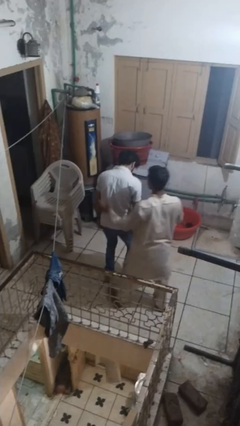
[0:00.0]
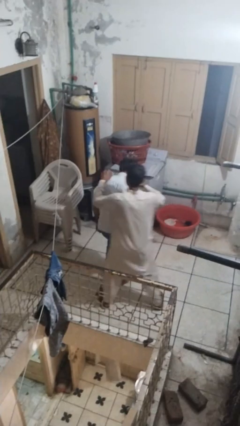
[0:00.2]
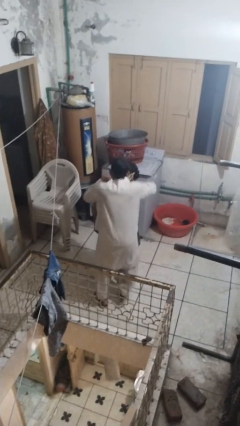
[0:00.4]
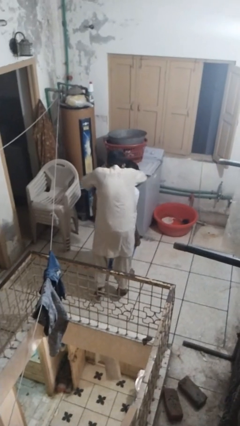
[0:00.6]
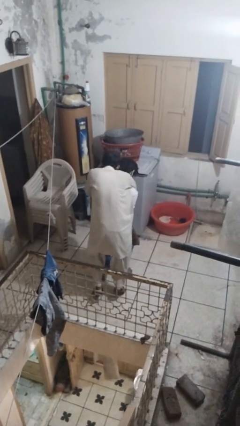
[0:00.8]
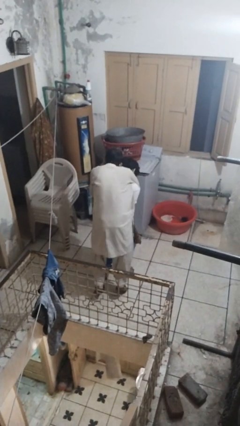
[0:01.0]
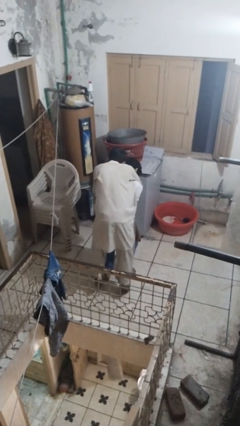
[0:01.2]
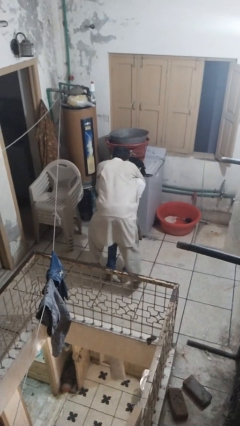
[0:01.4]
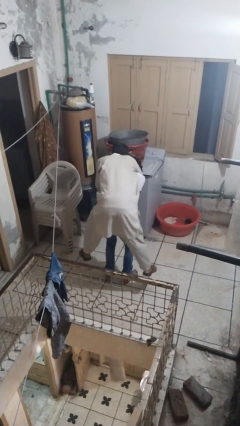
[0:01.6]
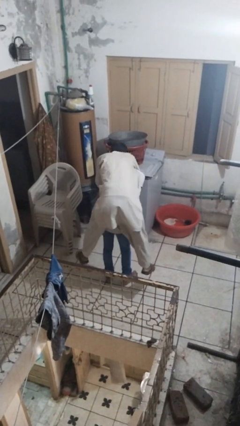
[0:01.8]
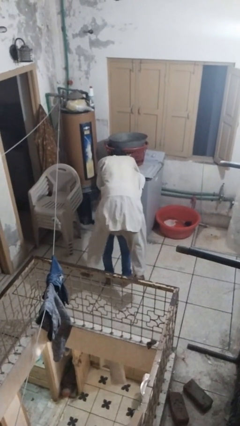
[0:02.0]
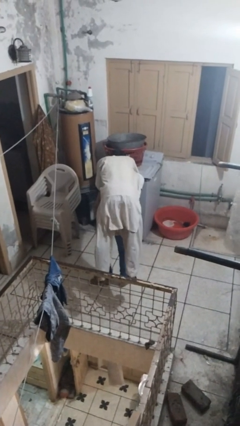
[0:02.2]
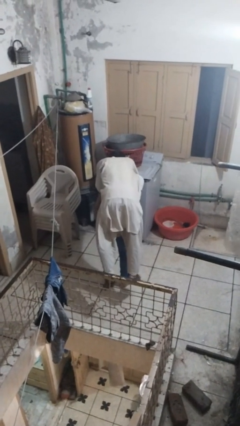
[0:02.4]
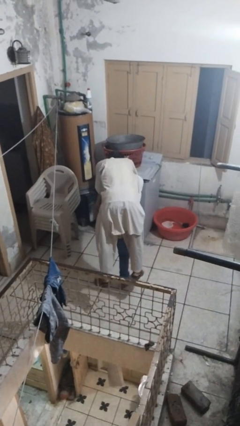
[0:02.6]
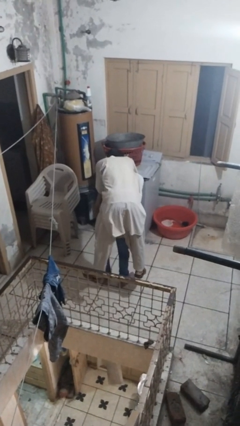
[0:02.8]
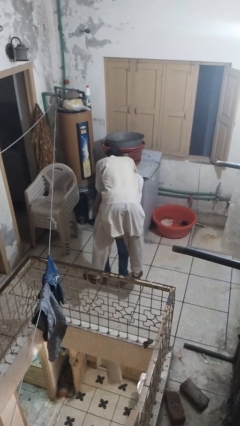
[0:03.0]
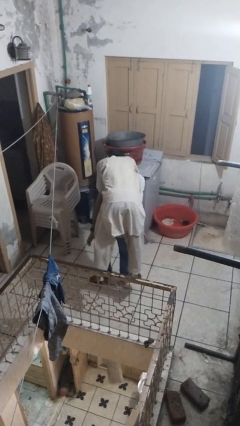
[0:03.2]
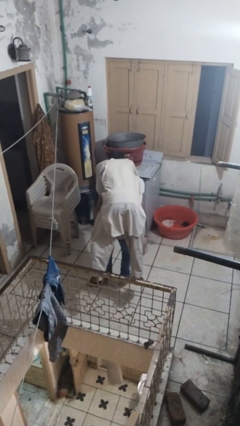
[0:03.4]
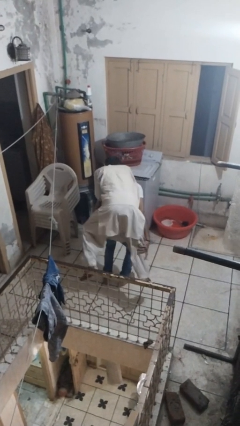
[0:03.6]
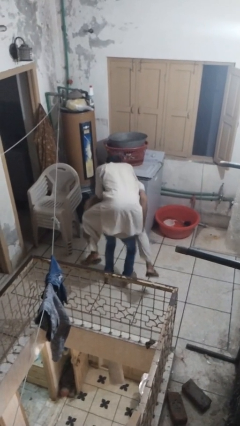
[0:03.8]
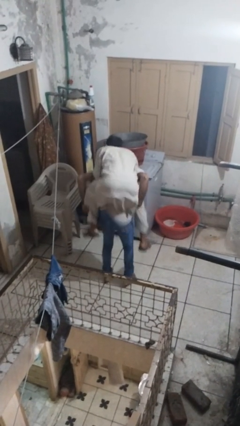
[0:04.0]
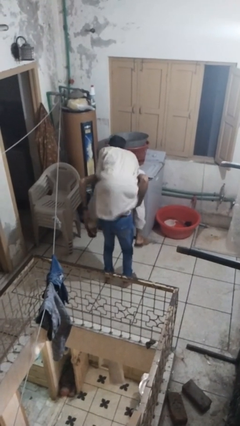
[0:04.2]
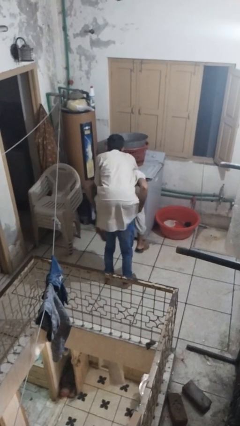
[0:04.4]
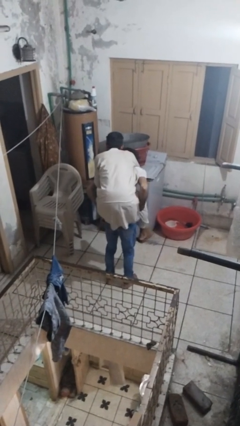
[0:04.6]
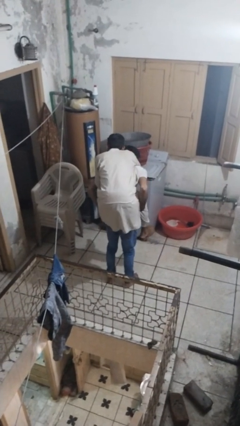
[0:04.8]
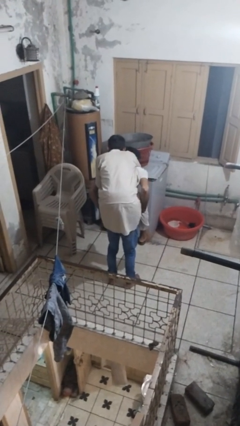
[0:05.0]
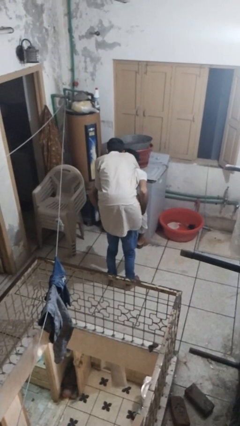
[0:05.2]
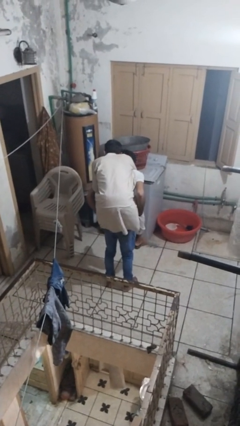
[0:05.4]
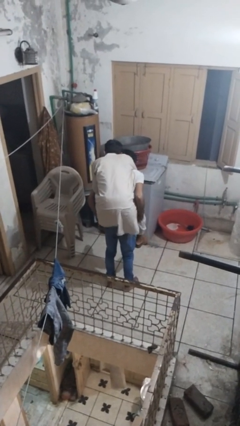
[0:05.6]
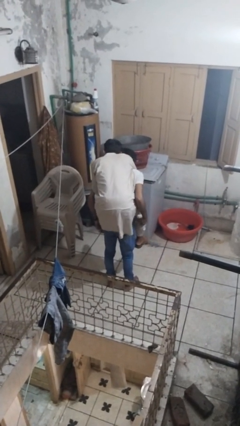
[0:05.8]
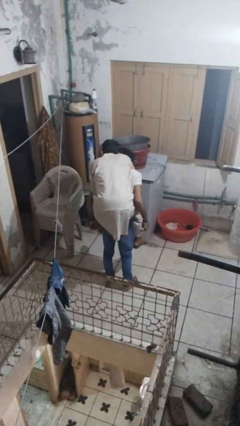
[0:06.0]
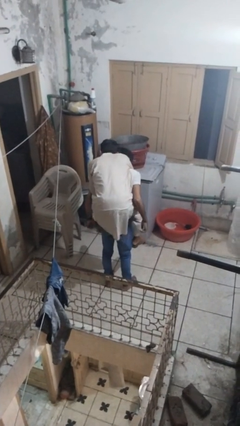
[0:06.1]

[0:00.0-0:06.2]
person carries person on back

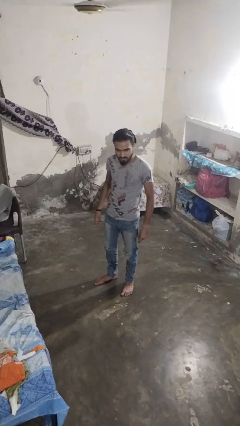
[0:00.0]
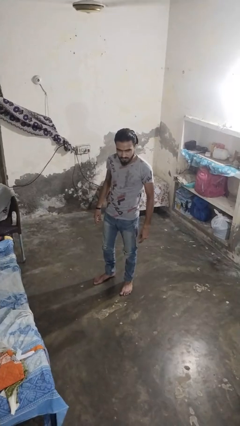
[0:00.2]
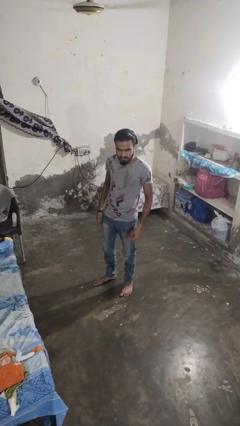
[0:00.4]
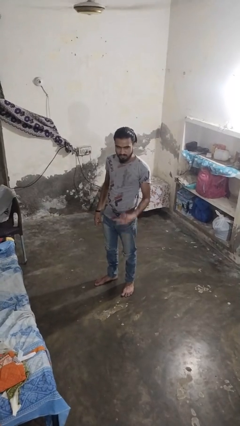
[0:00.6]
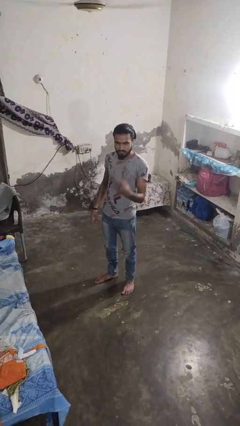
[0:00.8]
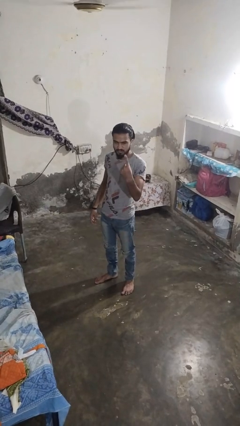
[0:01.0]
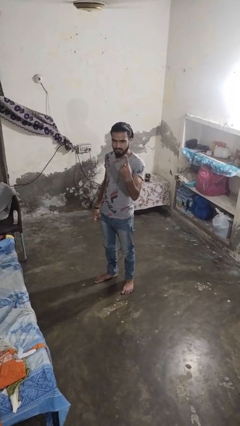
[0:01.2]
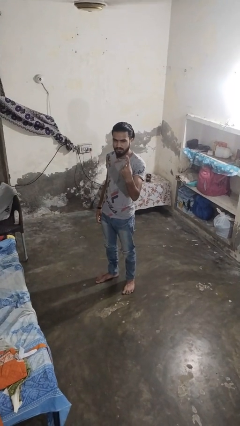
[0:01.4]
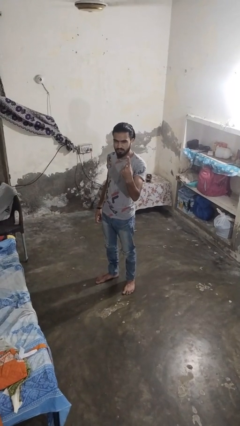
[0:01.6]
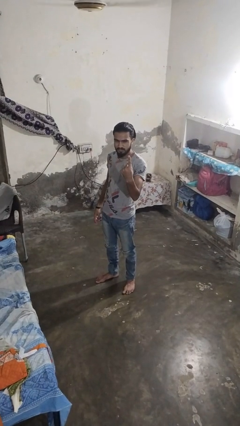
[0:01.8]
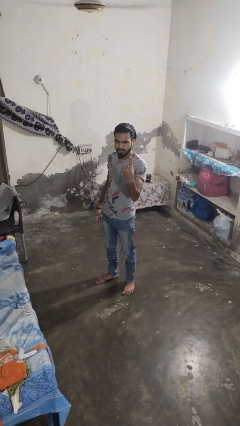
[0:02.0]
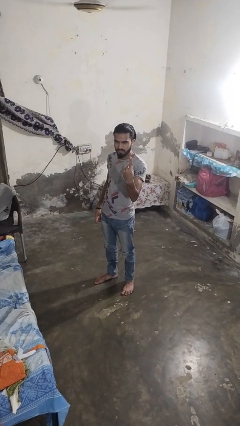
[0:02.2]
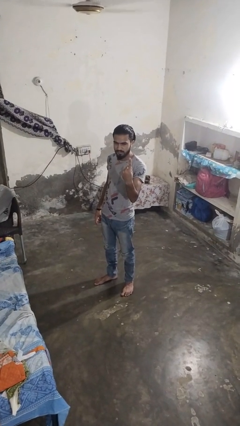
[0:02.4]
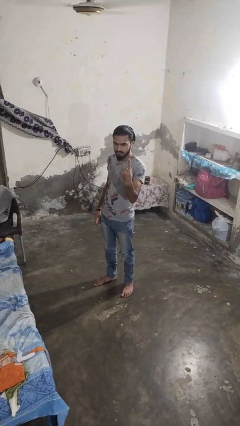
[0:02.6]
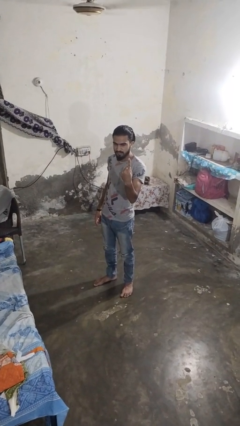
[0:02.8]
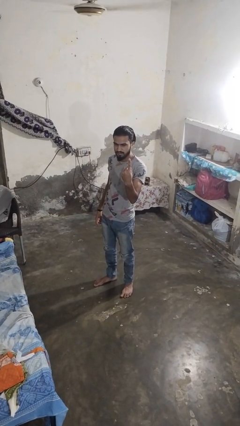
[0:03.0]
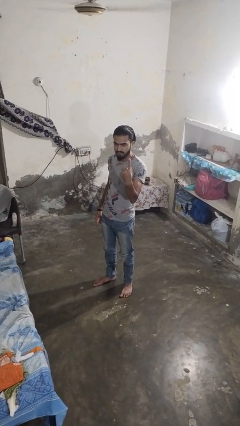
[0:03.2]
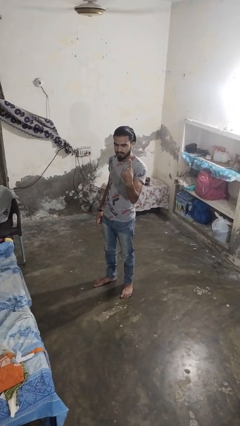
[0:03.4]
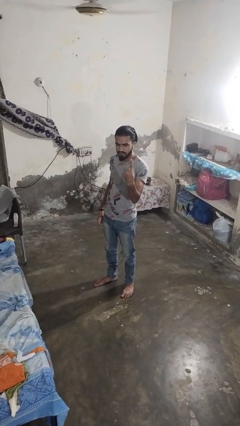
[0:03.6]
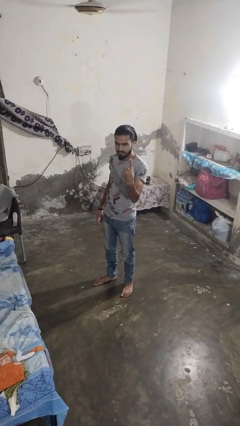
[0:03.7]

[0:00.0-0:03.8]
person gestures number one

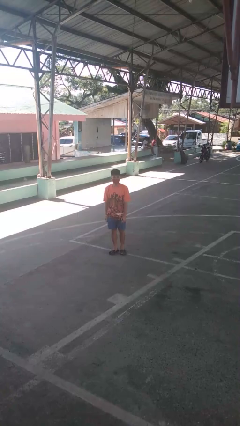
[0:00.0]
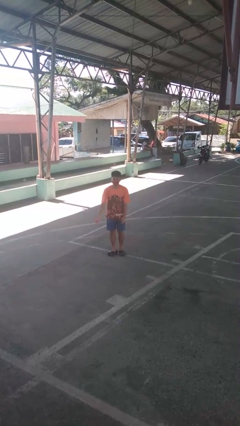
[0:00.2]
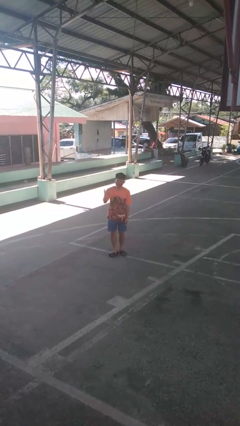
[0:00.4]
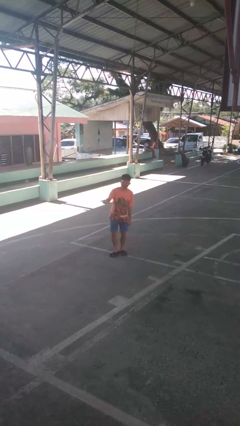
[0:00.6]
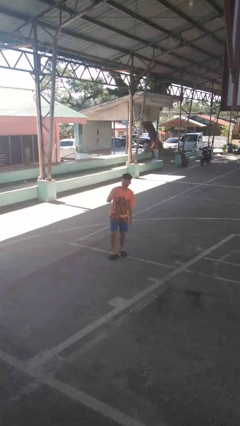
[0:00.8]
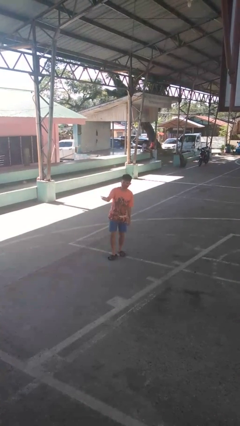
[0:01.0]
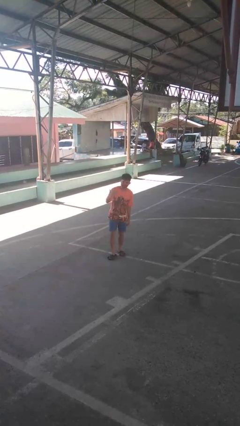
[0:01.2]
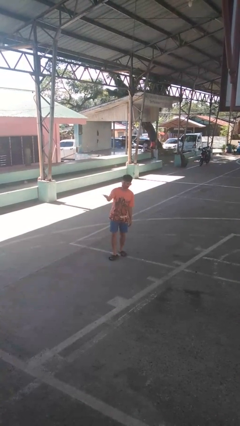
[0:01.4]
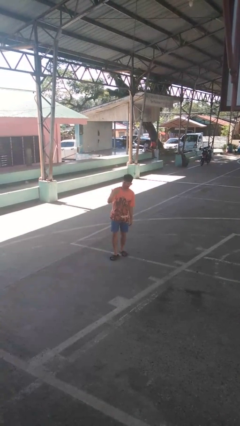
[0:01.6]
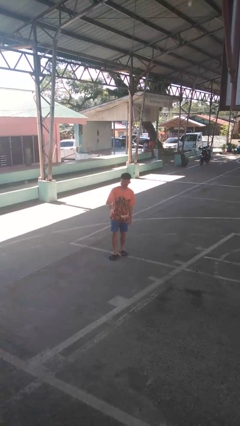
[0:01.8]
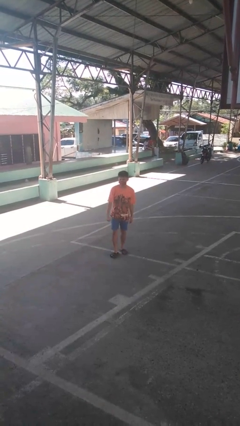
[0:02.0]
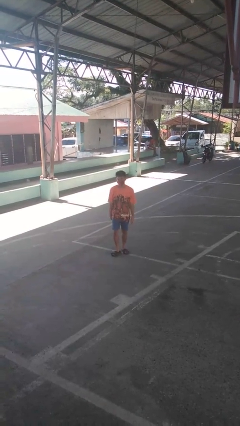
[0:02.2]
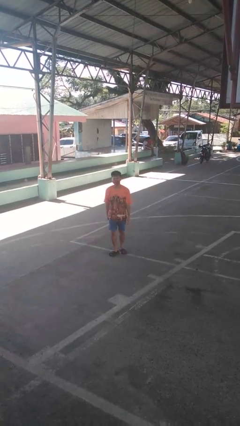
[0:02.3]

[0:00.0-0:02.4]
person gestures come here

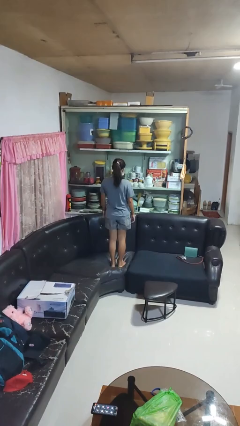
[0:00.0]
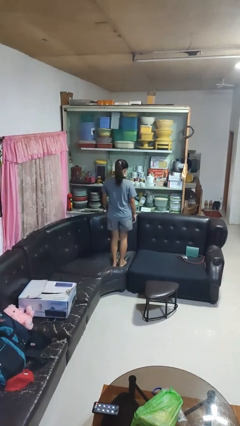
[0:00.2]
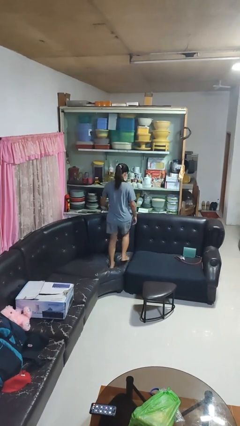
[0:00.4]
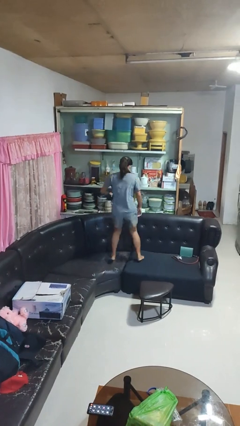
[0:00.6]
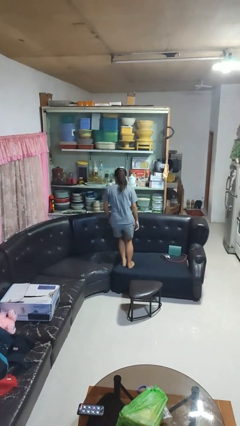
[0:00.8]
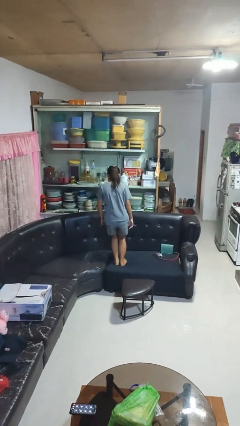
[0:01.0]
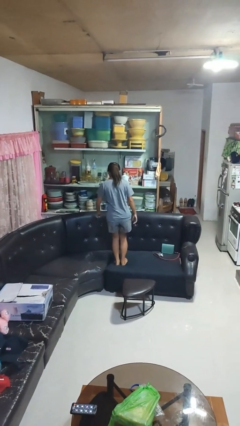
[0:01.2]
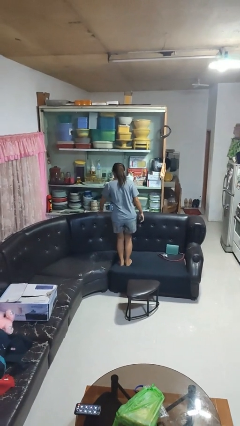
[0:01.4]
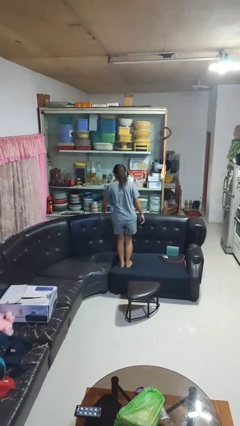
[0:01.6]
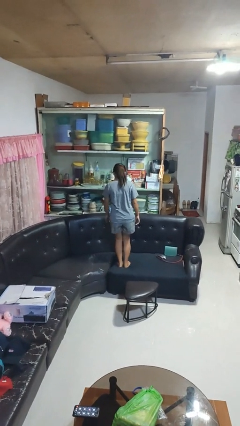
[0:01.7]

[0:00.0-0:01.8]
person jumps on couch

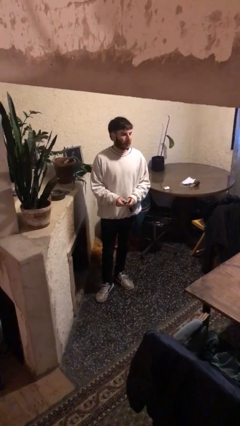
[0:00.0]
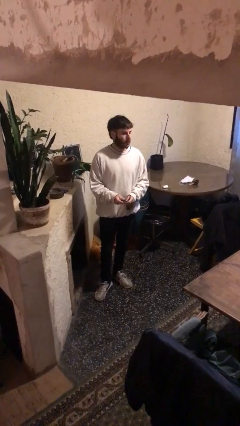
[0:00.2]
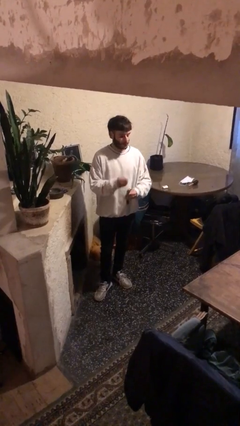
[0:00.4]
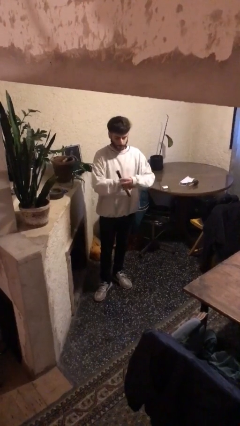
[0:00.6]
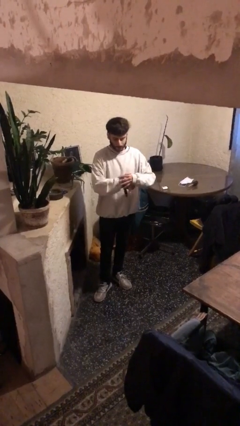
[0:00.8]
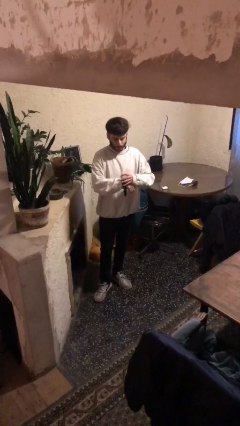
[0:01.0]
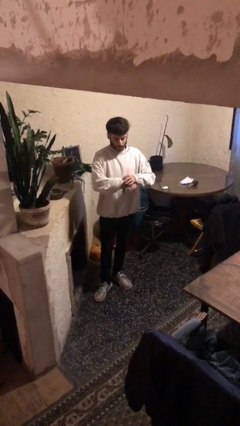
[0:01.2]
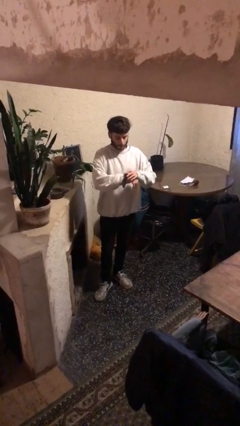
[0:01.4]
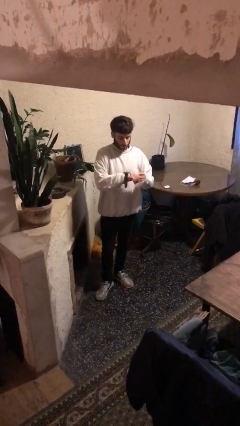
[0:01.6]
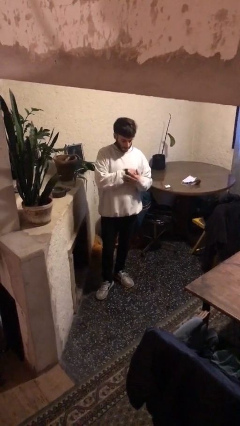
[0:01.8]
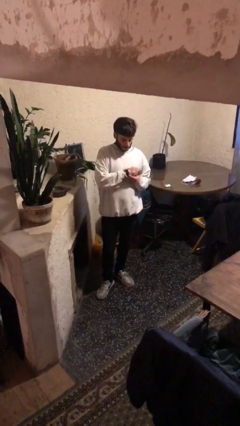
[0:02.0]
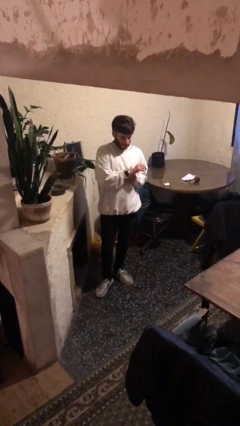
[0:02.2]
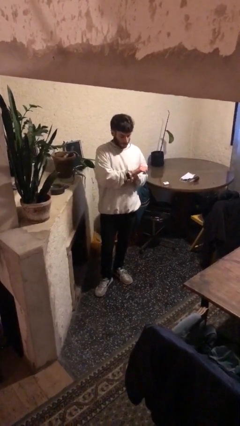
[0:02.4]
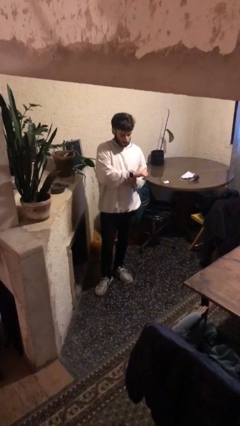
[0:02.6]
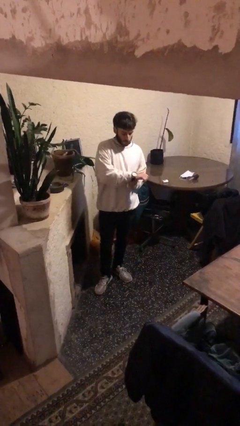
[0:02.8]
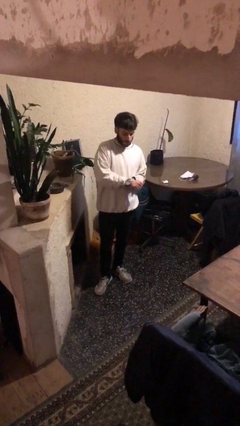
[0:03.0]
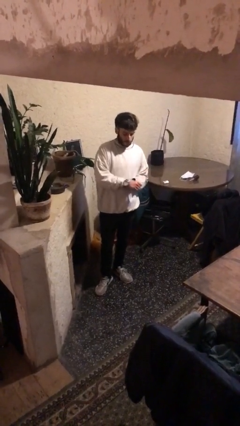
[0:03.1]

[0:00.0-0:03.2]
person puts on wristwatch
